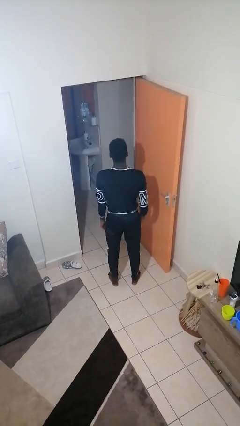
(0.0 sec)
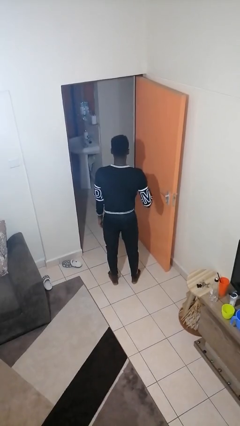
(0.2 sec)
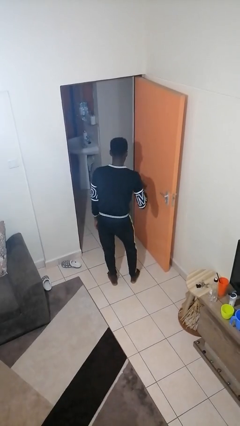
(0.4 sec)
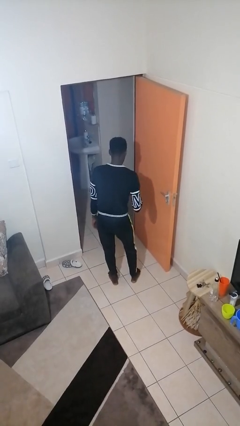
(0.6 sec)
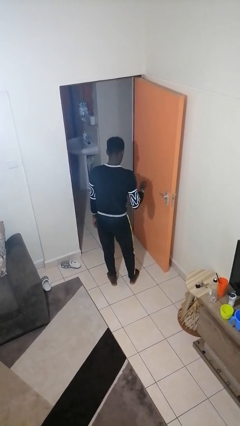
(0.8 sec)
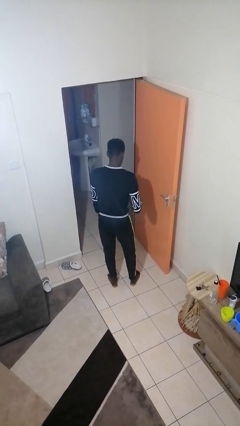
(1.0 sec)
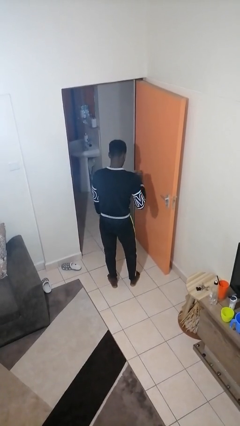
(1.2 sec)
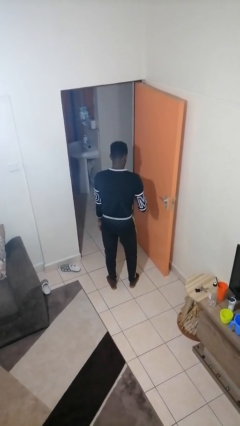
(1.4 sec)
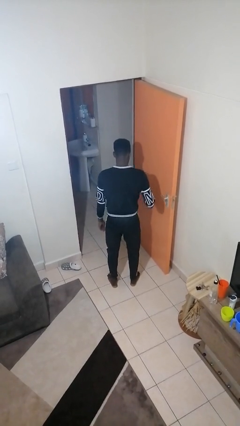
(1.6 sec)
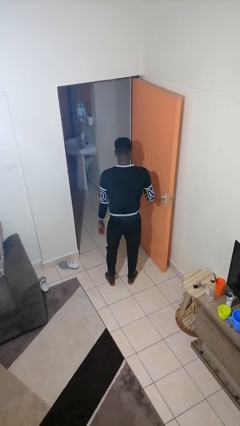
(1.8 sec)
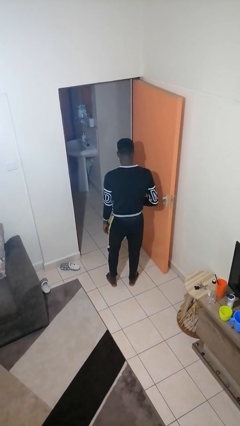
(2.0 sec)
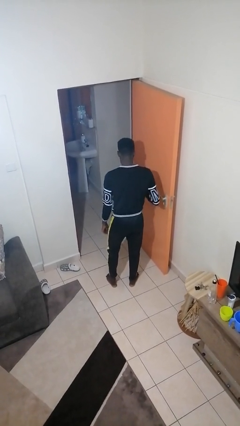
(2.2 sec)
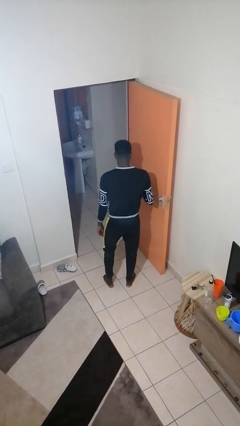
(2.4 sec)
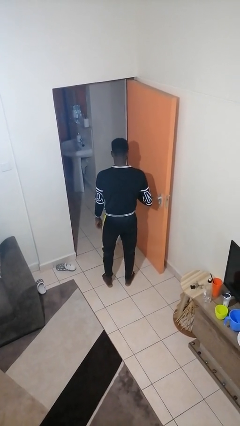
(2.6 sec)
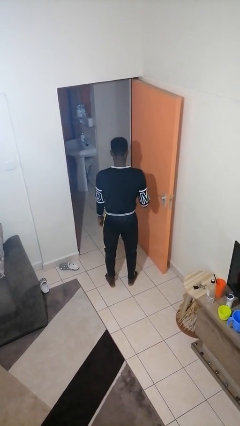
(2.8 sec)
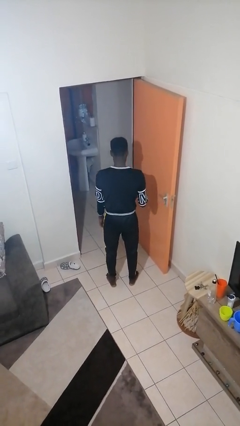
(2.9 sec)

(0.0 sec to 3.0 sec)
person snaps fingers

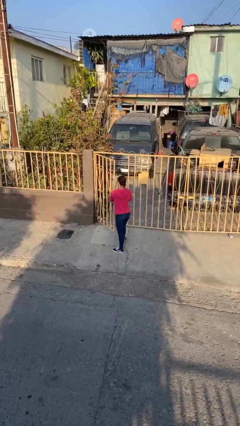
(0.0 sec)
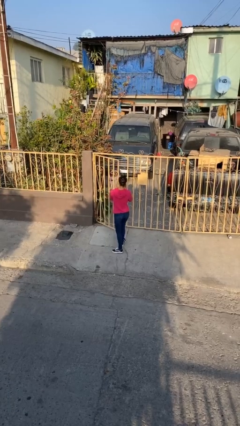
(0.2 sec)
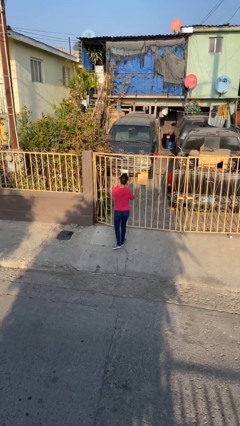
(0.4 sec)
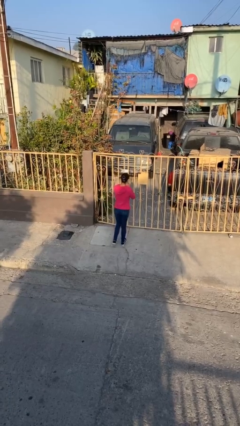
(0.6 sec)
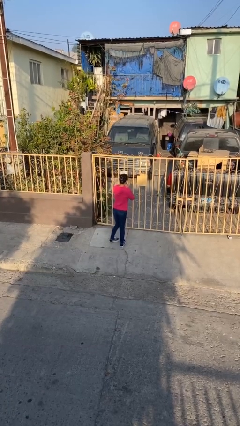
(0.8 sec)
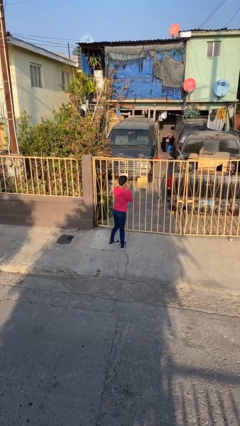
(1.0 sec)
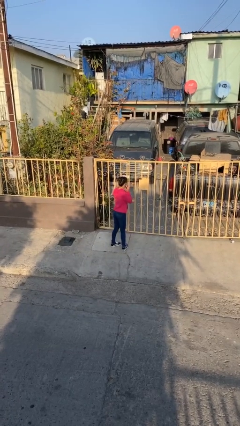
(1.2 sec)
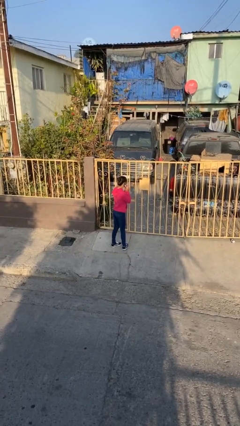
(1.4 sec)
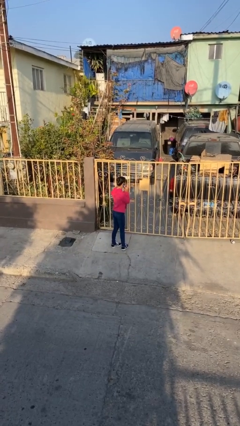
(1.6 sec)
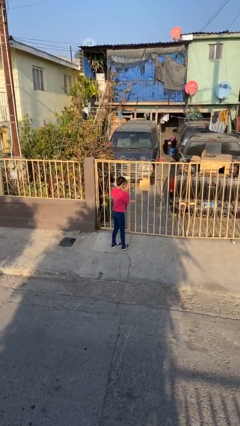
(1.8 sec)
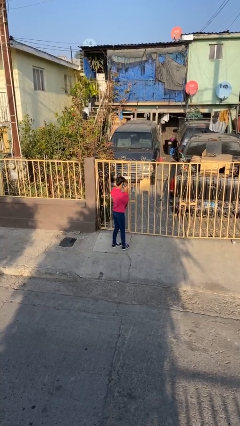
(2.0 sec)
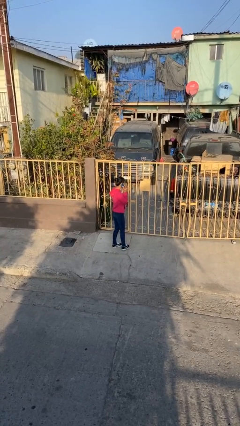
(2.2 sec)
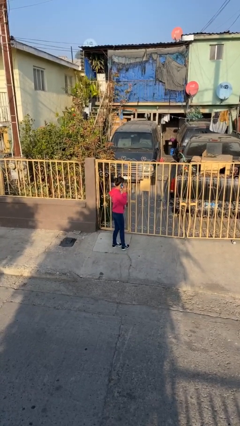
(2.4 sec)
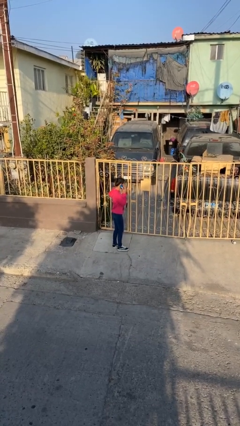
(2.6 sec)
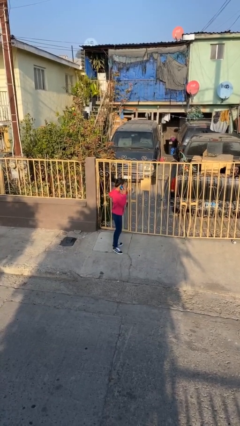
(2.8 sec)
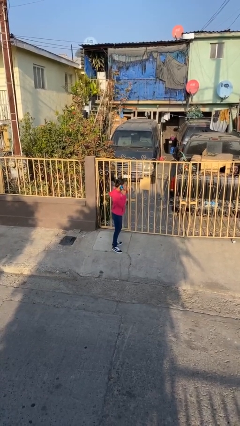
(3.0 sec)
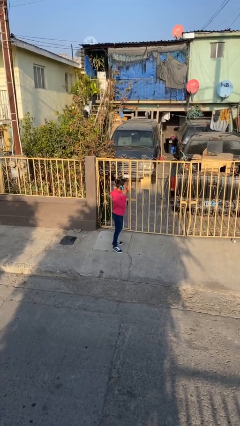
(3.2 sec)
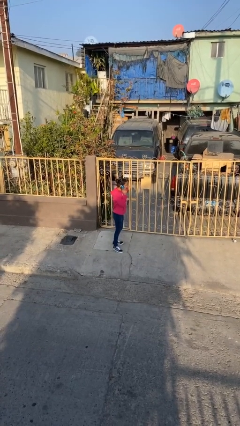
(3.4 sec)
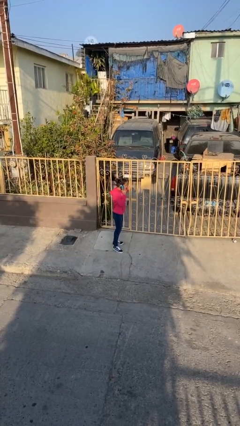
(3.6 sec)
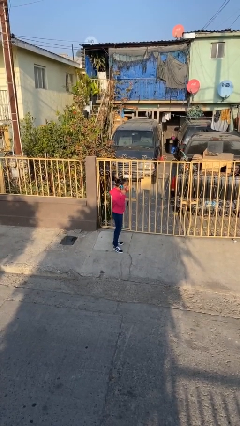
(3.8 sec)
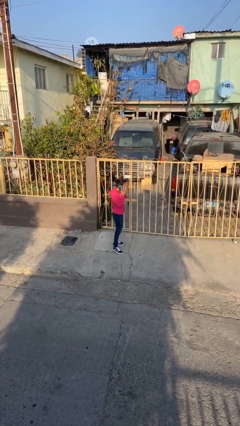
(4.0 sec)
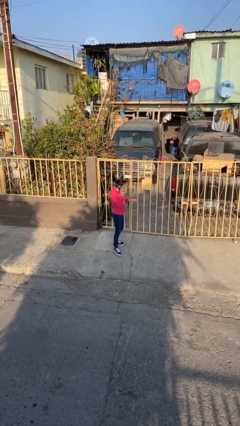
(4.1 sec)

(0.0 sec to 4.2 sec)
person closes facility door

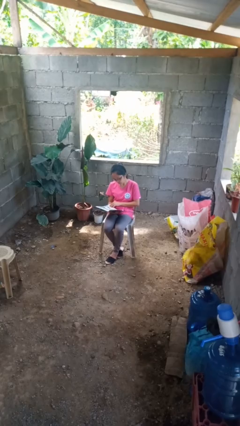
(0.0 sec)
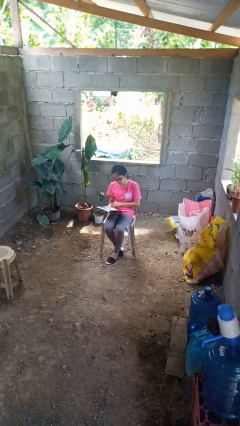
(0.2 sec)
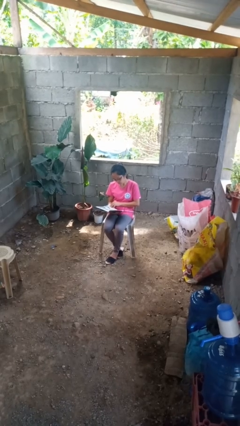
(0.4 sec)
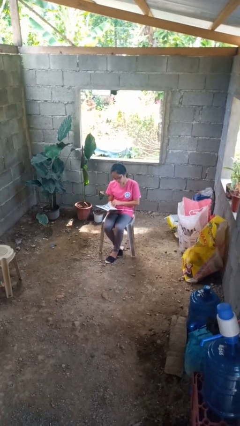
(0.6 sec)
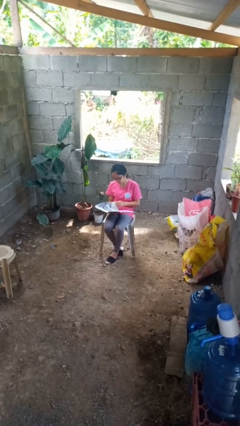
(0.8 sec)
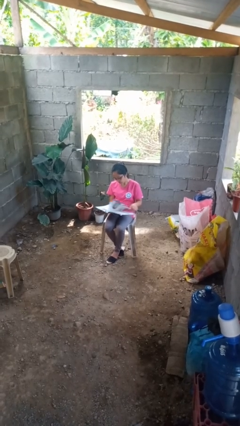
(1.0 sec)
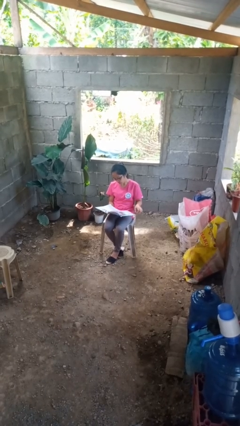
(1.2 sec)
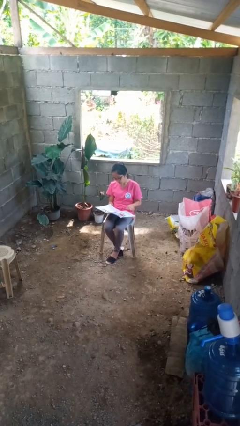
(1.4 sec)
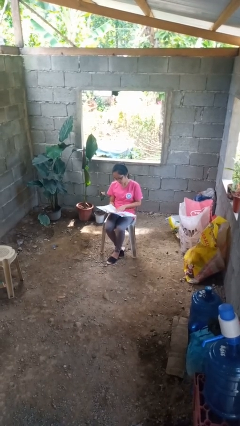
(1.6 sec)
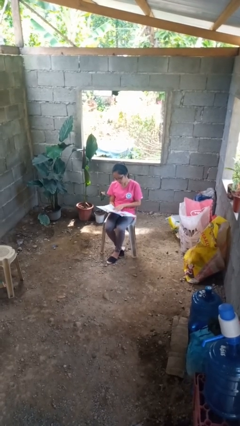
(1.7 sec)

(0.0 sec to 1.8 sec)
person reads magazine

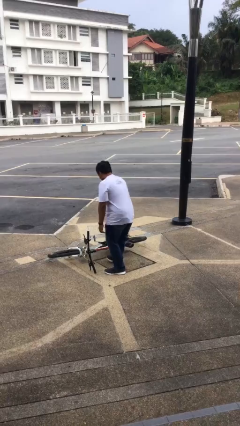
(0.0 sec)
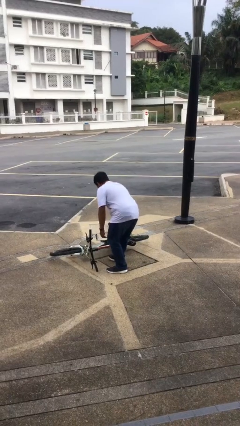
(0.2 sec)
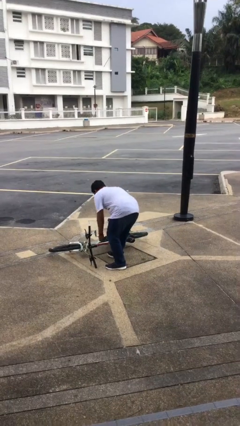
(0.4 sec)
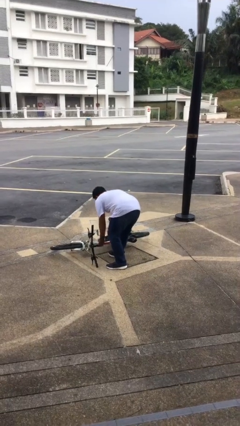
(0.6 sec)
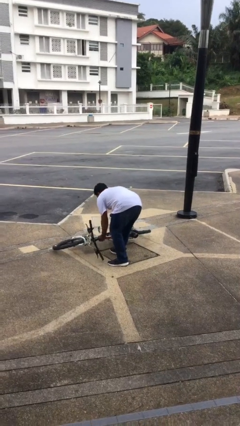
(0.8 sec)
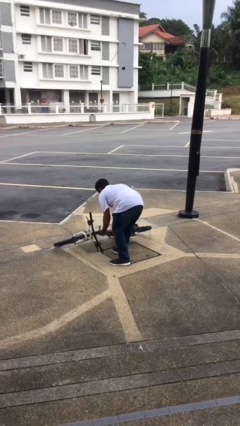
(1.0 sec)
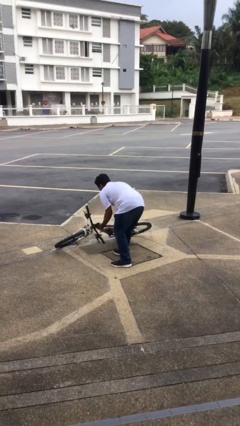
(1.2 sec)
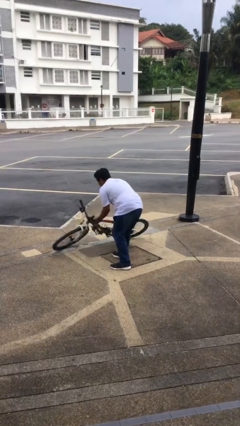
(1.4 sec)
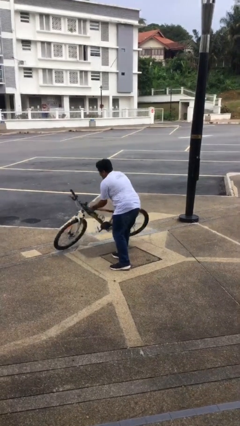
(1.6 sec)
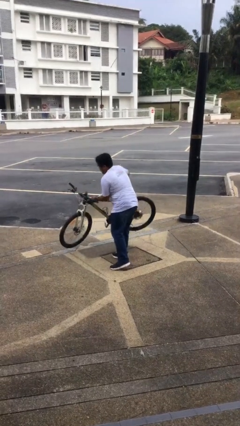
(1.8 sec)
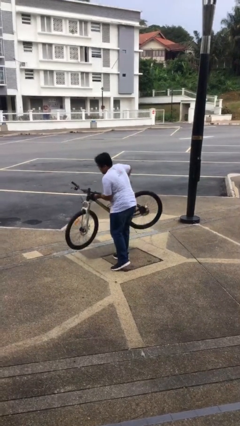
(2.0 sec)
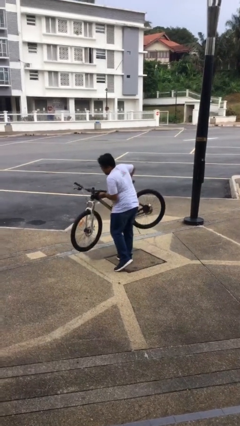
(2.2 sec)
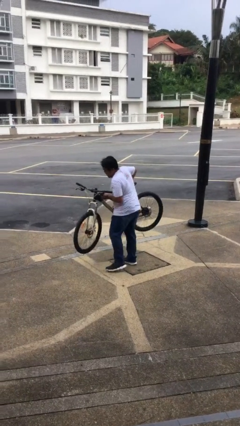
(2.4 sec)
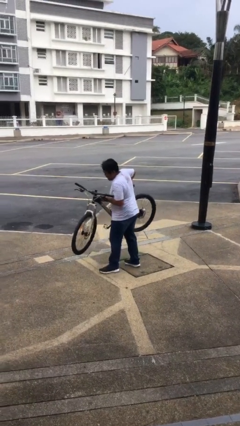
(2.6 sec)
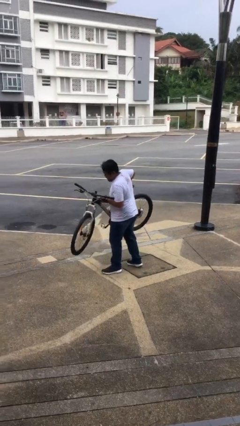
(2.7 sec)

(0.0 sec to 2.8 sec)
person picks up object from floor

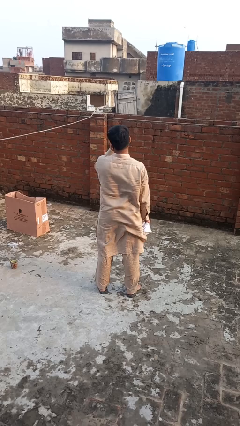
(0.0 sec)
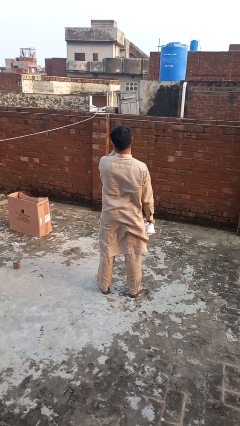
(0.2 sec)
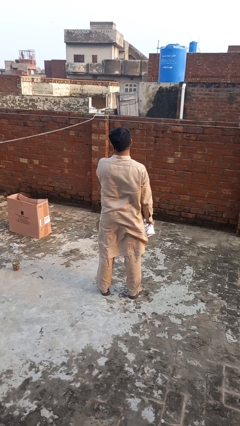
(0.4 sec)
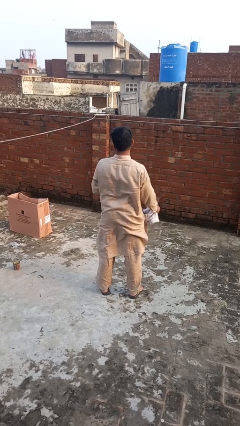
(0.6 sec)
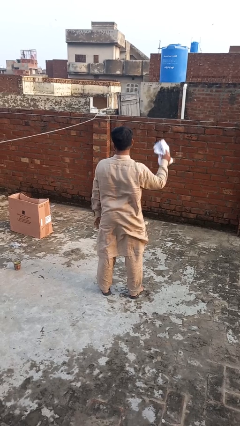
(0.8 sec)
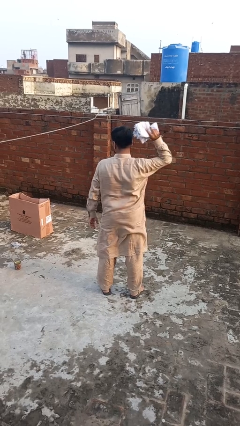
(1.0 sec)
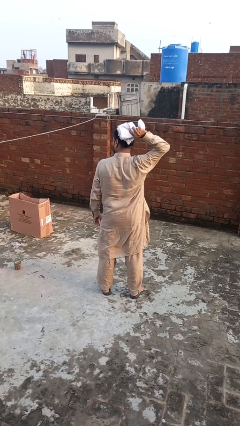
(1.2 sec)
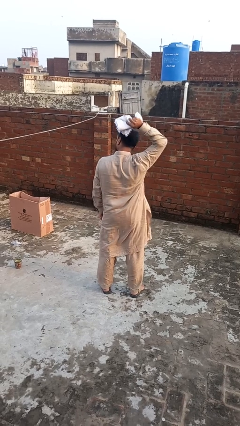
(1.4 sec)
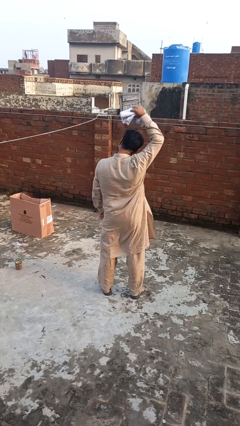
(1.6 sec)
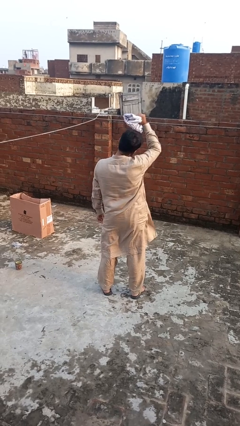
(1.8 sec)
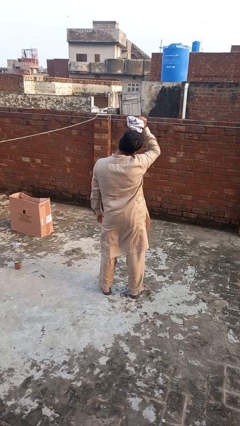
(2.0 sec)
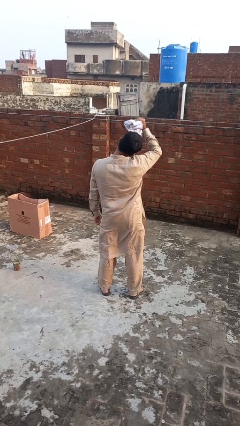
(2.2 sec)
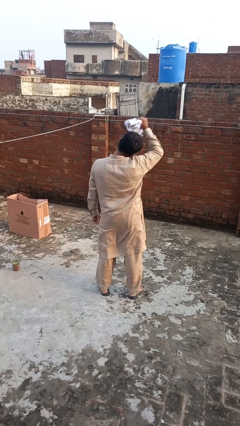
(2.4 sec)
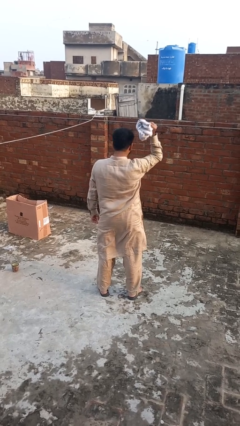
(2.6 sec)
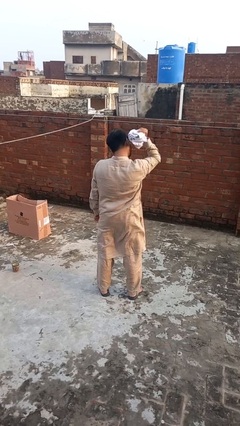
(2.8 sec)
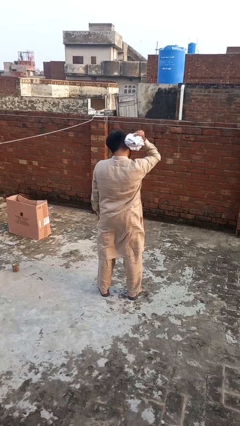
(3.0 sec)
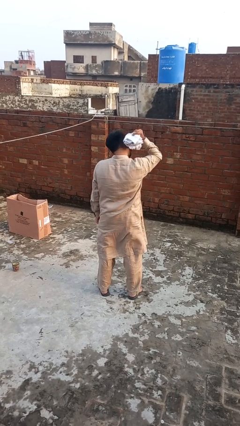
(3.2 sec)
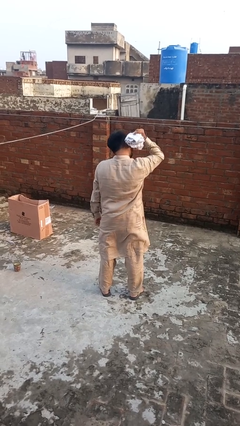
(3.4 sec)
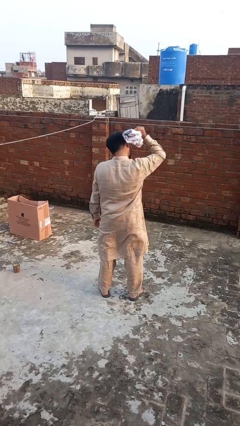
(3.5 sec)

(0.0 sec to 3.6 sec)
person dries hair with towel

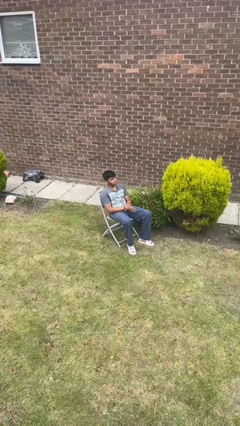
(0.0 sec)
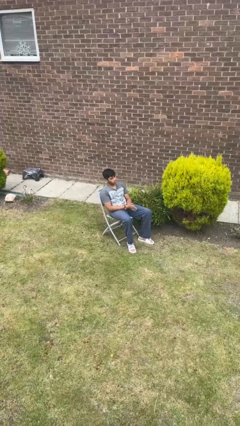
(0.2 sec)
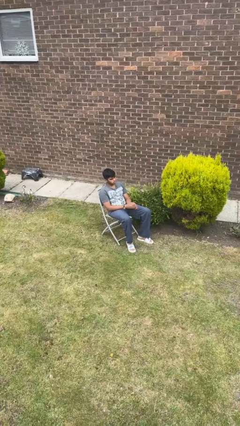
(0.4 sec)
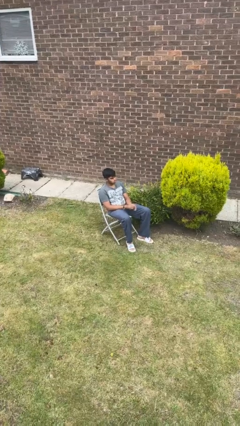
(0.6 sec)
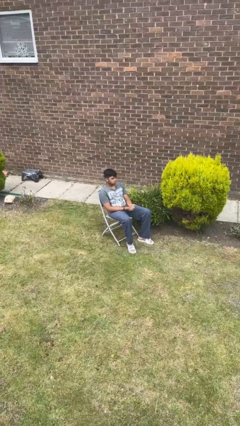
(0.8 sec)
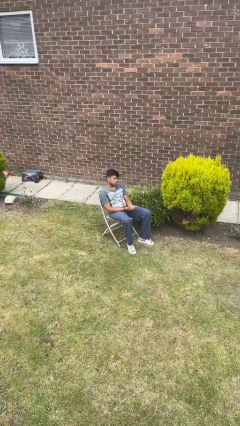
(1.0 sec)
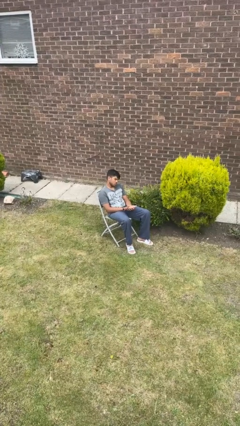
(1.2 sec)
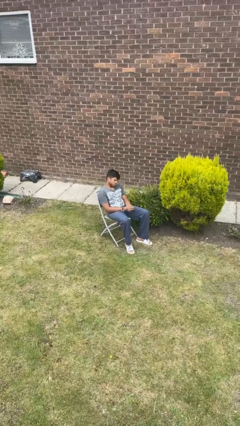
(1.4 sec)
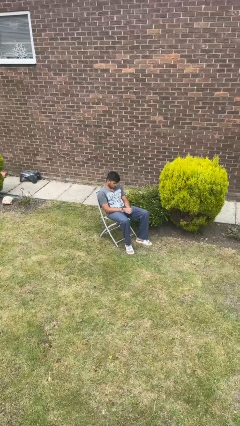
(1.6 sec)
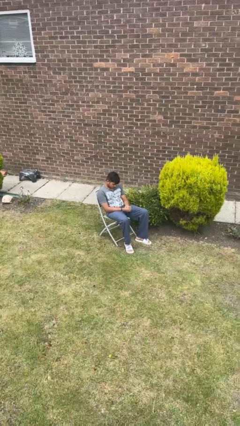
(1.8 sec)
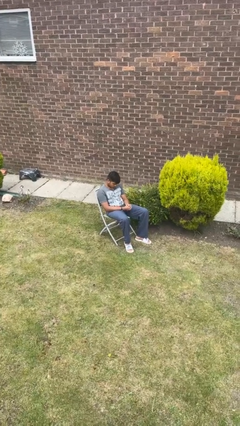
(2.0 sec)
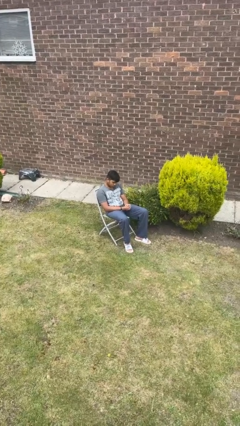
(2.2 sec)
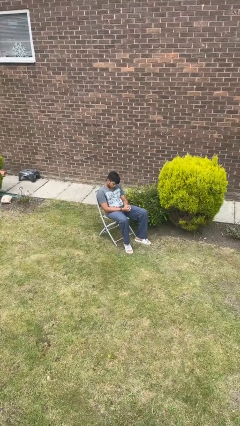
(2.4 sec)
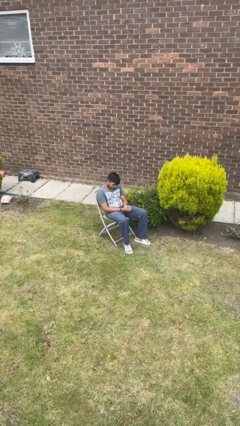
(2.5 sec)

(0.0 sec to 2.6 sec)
person looks at hands in lap
